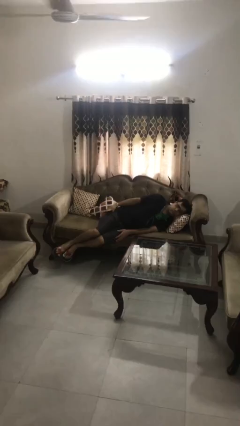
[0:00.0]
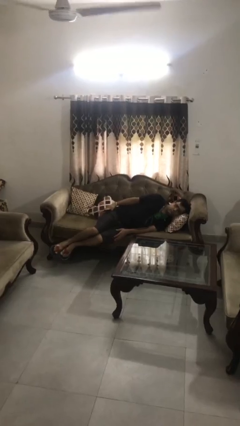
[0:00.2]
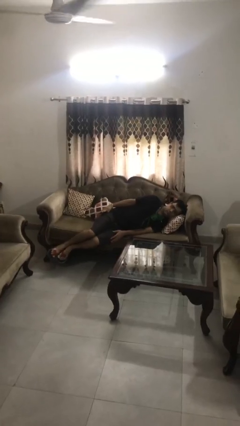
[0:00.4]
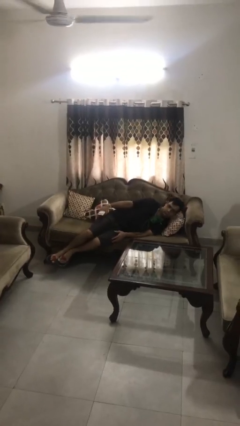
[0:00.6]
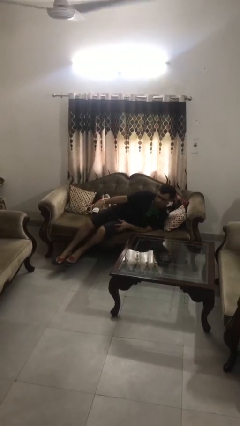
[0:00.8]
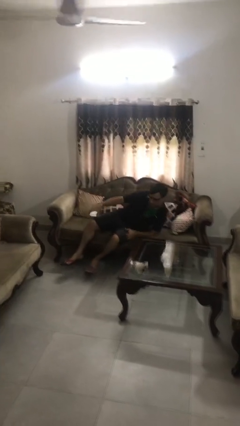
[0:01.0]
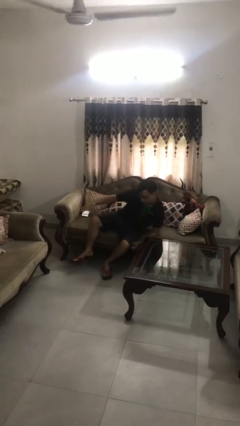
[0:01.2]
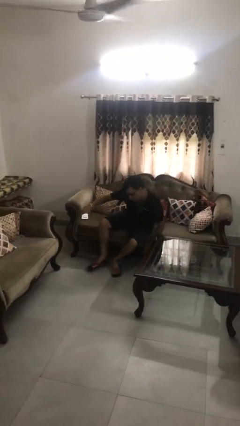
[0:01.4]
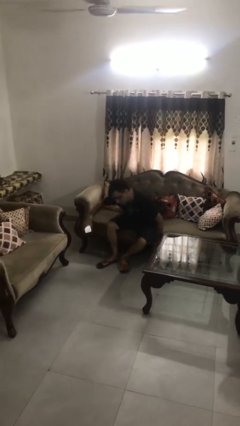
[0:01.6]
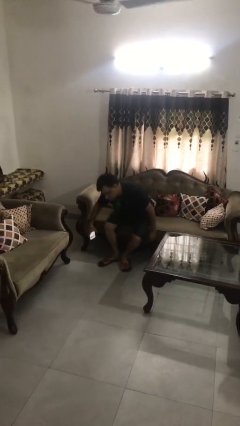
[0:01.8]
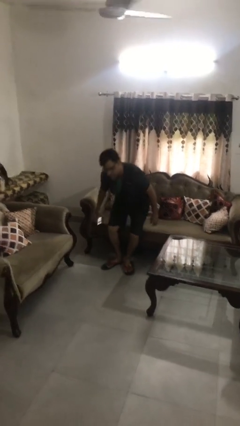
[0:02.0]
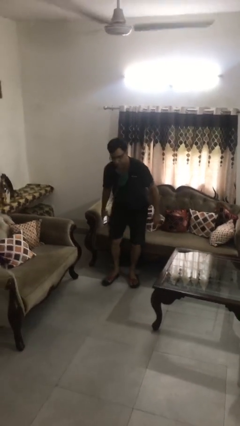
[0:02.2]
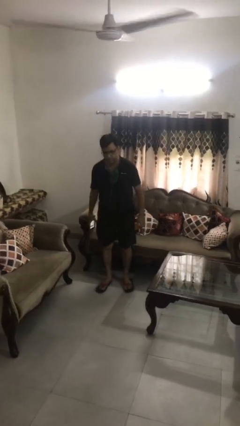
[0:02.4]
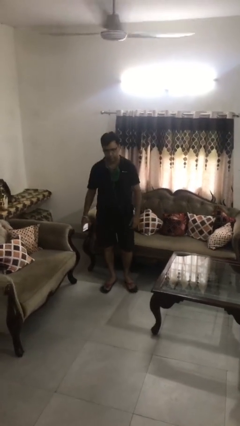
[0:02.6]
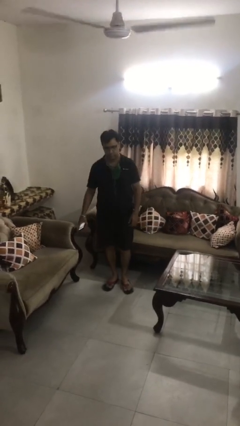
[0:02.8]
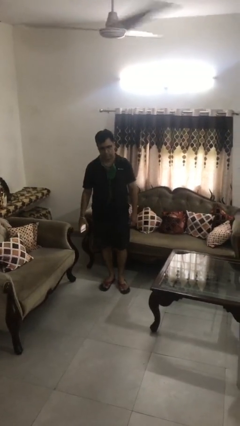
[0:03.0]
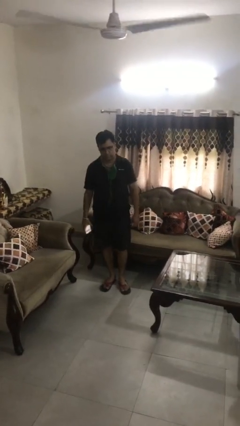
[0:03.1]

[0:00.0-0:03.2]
person stands up

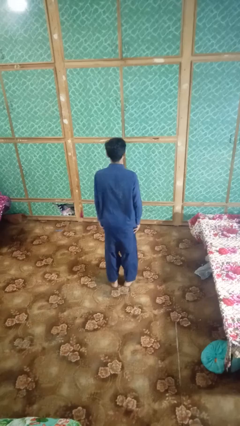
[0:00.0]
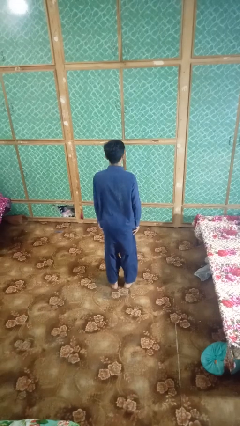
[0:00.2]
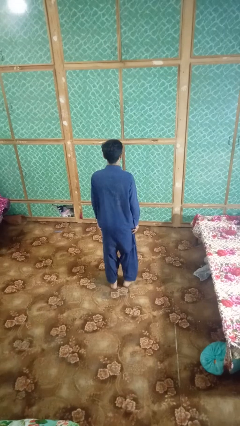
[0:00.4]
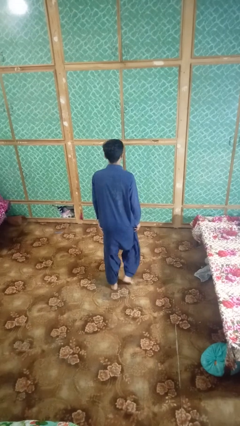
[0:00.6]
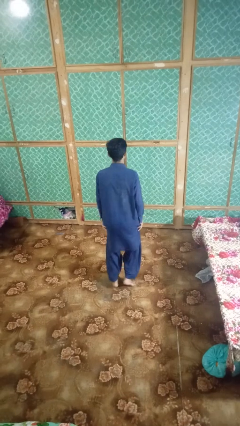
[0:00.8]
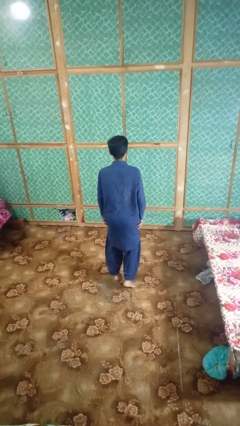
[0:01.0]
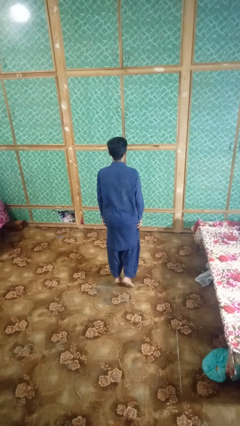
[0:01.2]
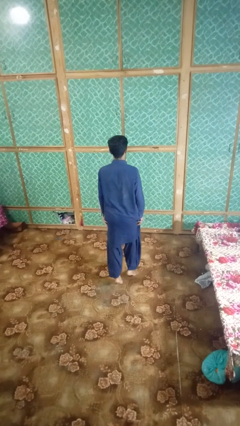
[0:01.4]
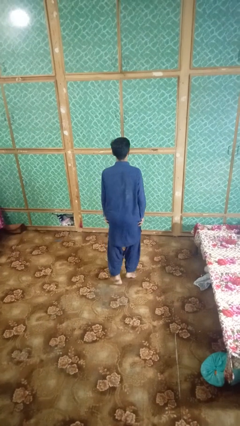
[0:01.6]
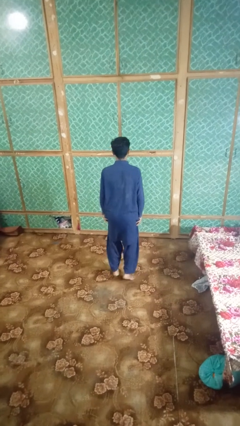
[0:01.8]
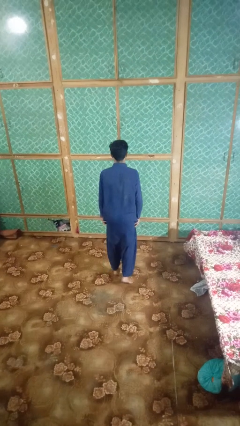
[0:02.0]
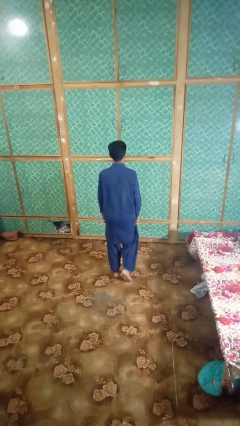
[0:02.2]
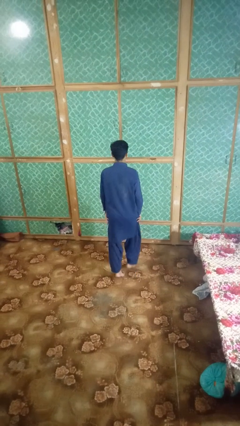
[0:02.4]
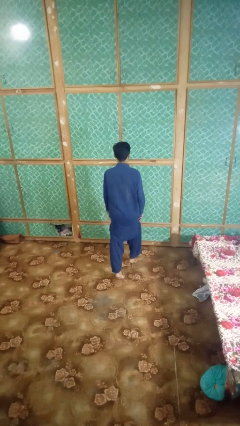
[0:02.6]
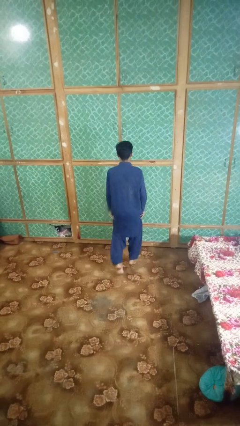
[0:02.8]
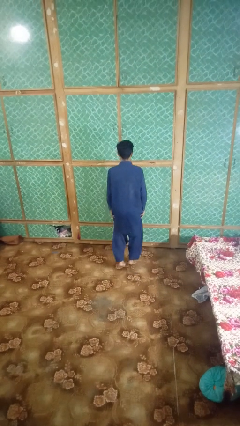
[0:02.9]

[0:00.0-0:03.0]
person walks tiptoe

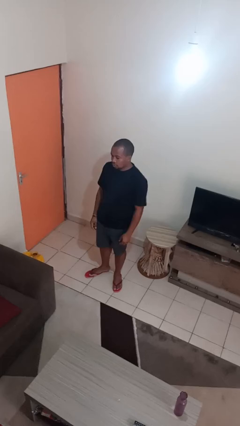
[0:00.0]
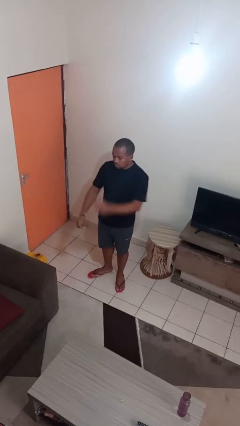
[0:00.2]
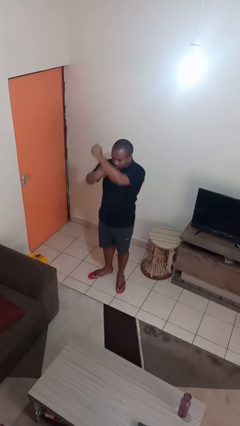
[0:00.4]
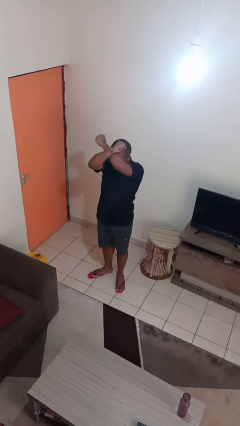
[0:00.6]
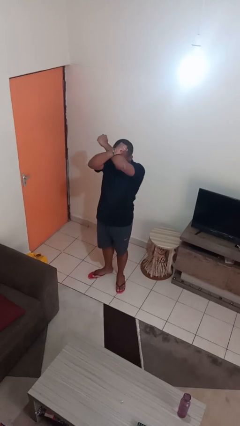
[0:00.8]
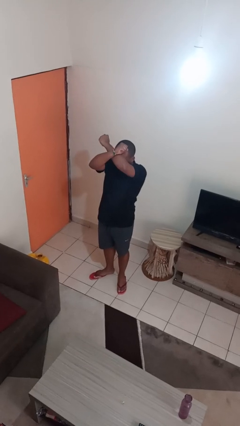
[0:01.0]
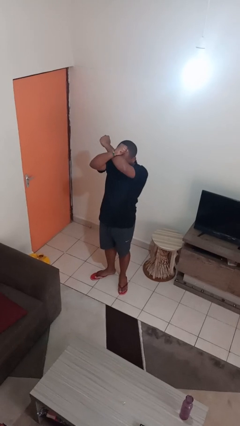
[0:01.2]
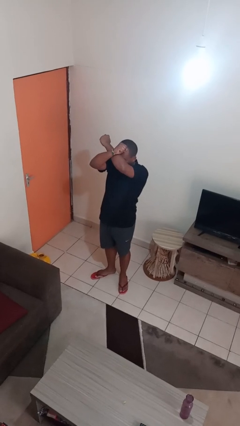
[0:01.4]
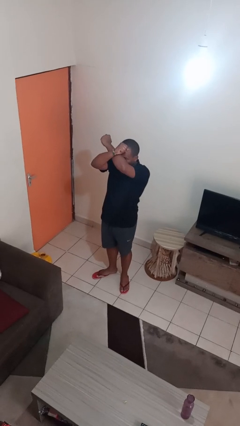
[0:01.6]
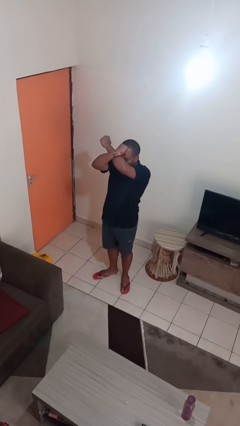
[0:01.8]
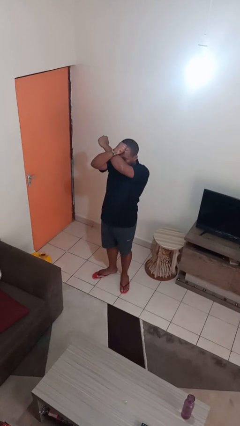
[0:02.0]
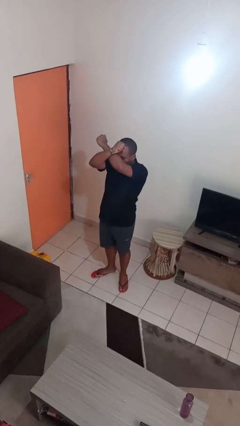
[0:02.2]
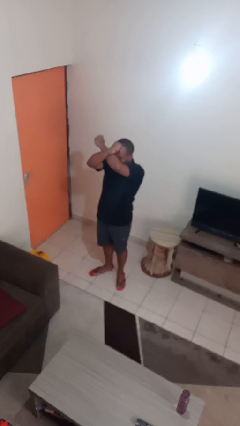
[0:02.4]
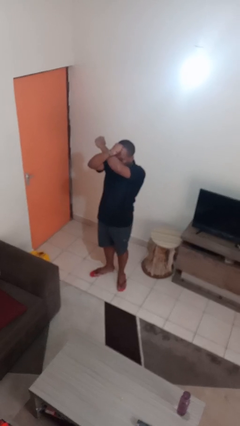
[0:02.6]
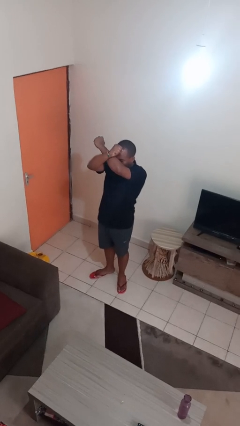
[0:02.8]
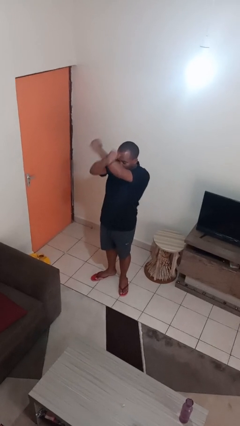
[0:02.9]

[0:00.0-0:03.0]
person gestures arms x

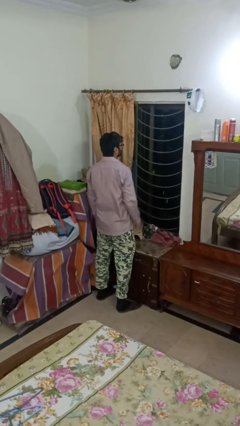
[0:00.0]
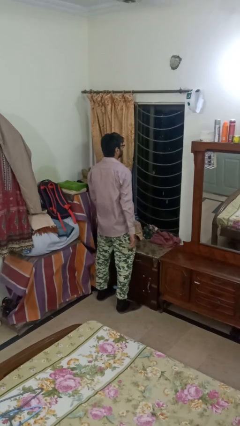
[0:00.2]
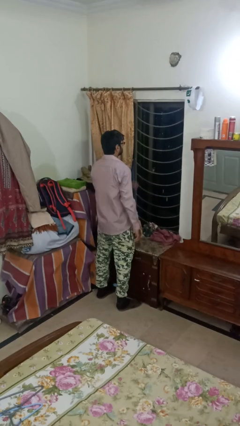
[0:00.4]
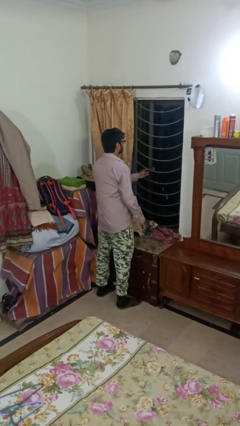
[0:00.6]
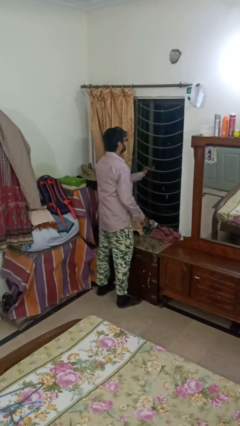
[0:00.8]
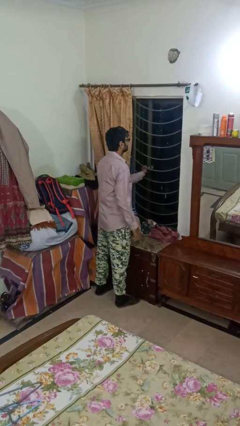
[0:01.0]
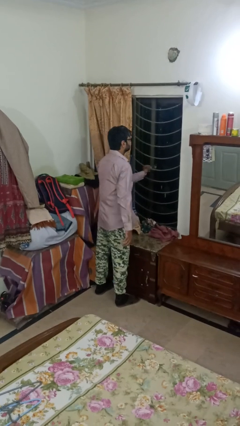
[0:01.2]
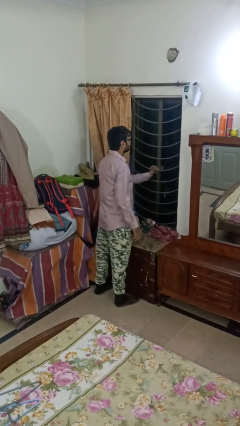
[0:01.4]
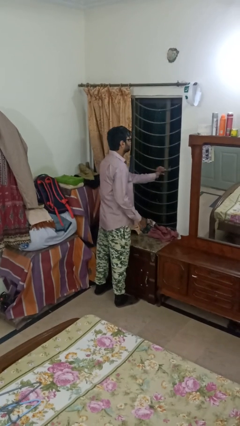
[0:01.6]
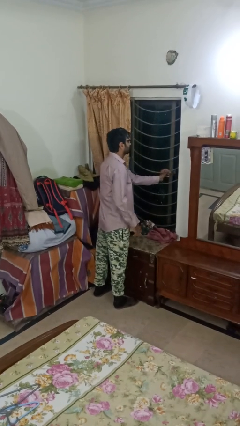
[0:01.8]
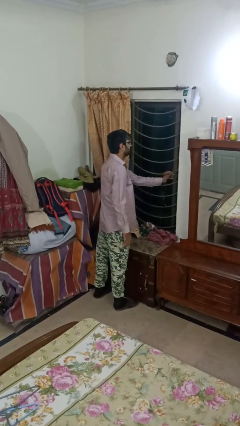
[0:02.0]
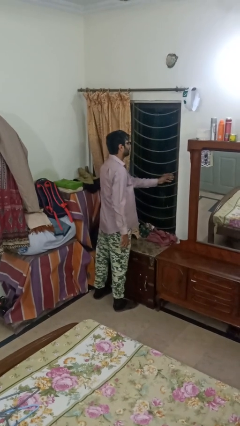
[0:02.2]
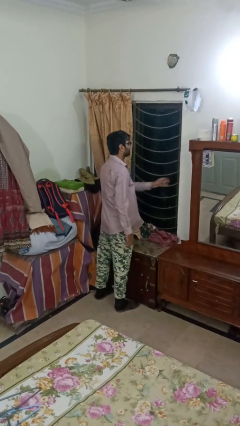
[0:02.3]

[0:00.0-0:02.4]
person closes home window

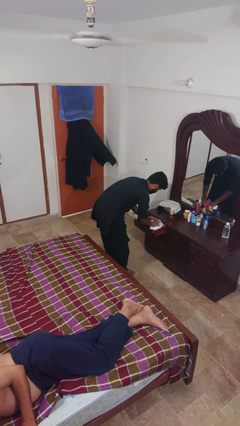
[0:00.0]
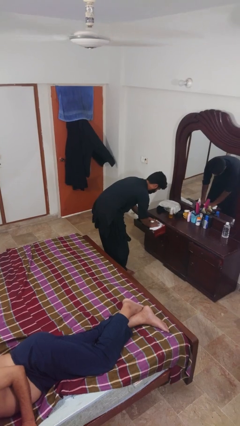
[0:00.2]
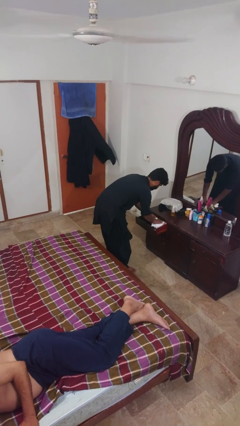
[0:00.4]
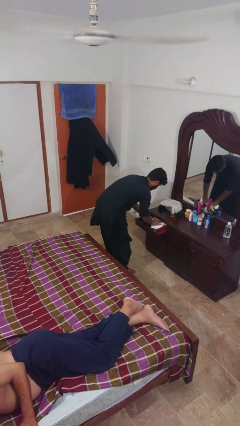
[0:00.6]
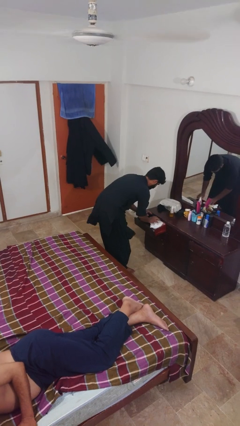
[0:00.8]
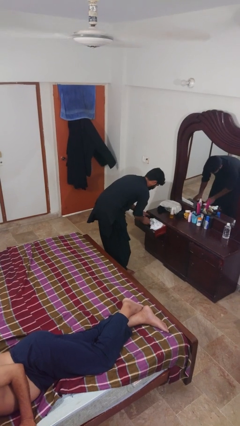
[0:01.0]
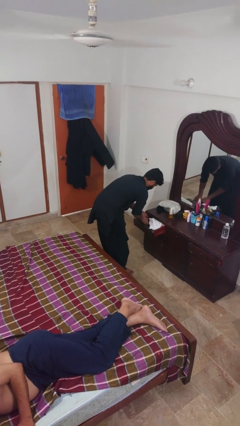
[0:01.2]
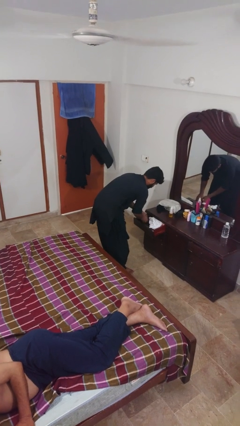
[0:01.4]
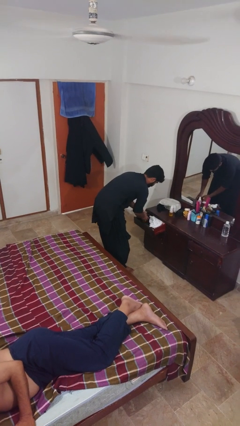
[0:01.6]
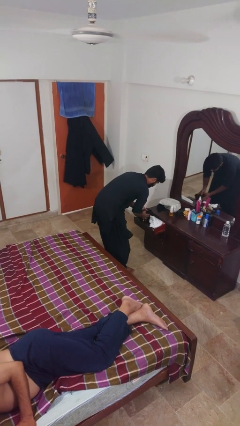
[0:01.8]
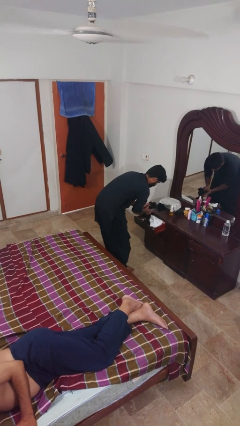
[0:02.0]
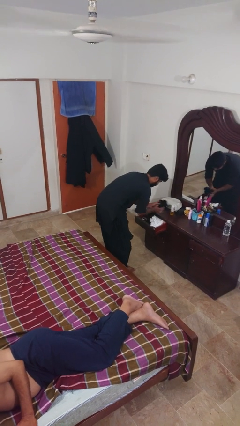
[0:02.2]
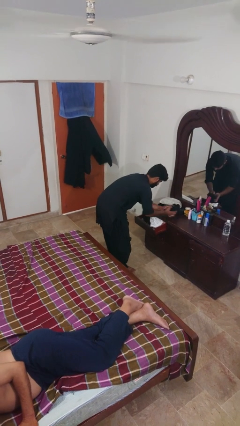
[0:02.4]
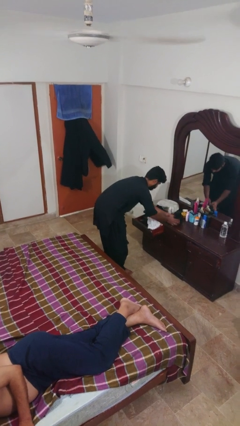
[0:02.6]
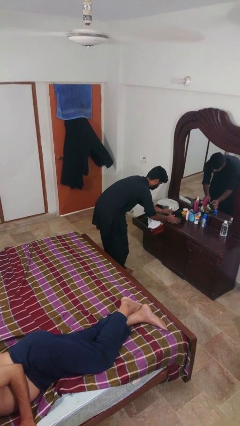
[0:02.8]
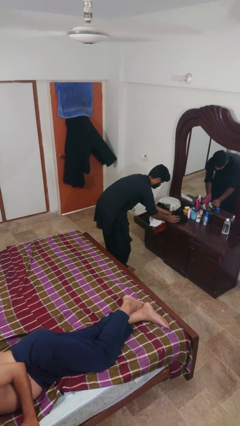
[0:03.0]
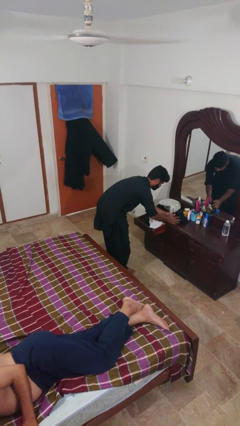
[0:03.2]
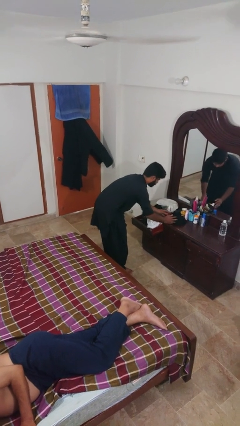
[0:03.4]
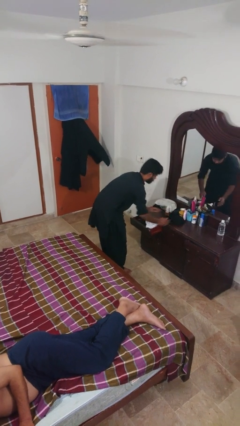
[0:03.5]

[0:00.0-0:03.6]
person takes clothes from dresser

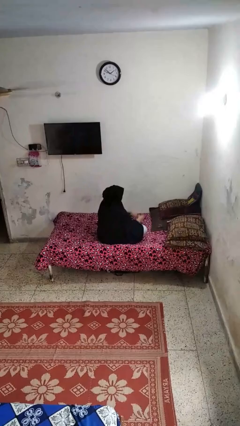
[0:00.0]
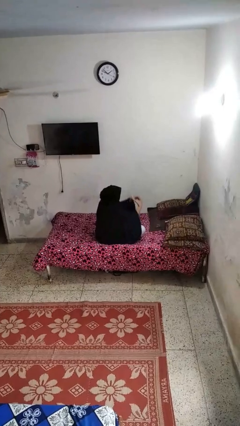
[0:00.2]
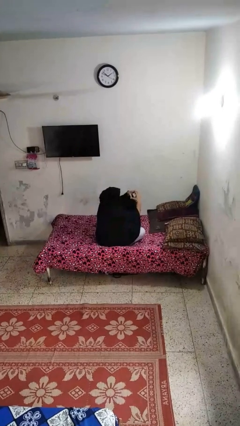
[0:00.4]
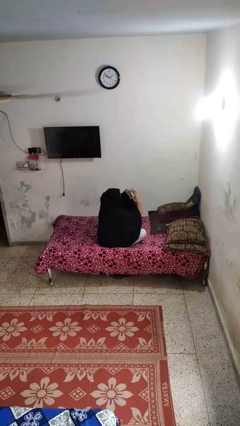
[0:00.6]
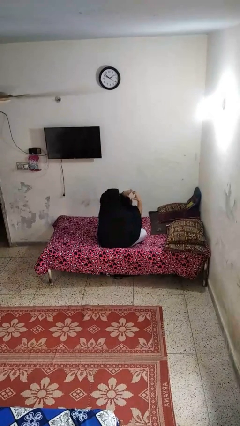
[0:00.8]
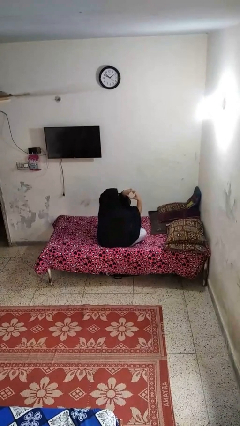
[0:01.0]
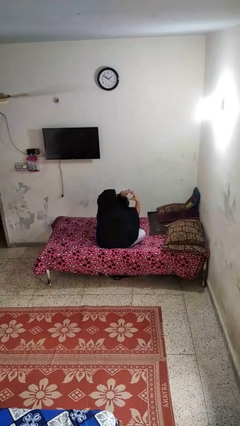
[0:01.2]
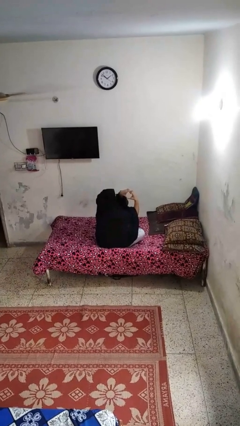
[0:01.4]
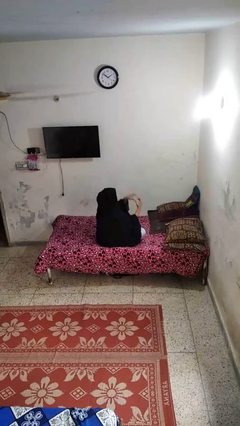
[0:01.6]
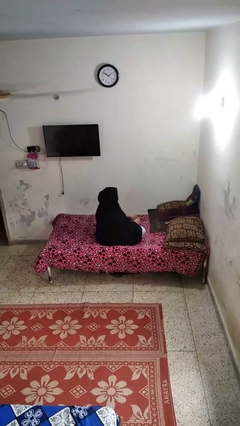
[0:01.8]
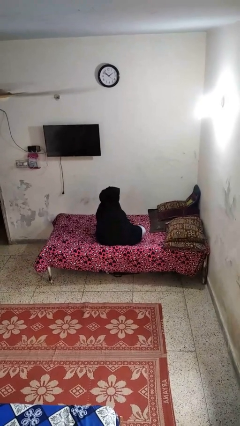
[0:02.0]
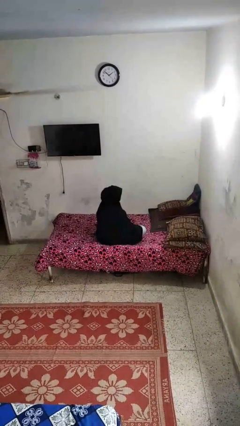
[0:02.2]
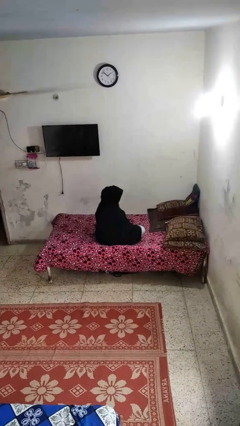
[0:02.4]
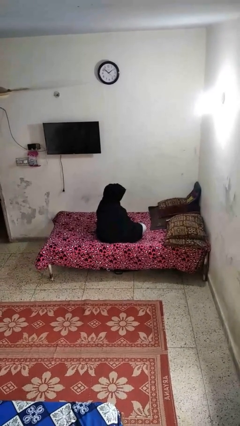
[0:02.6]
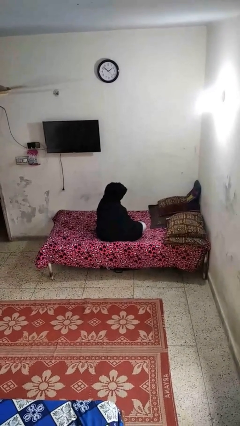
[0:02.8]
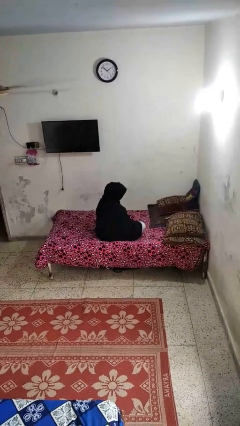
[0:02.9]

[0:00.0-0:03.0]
person gestures heart
